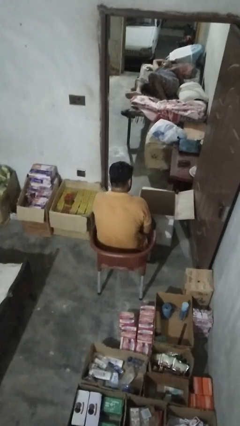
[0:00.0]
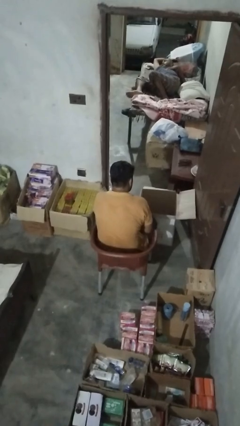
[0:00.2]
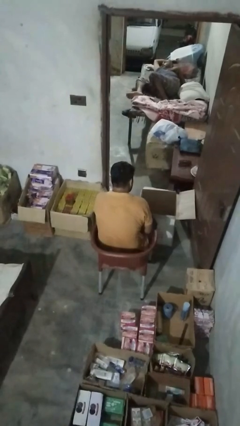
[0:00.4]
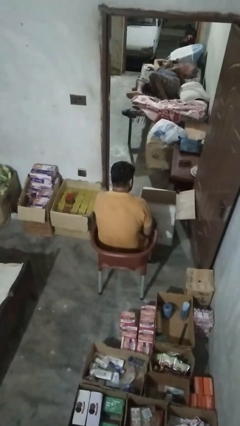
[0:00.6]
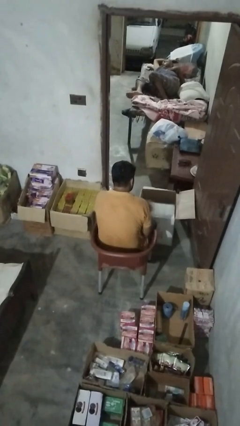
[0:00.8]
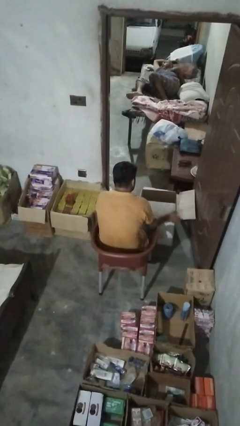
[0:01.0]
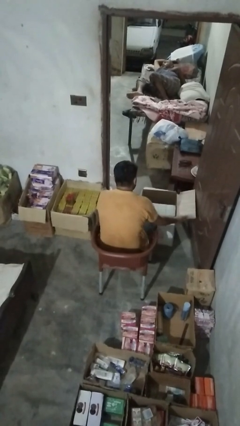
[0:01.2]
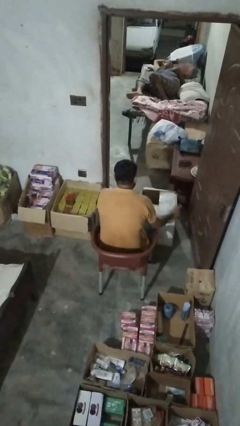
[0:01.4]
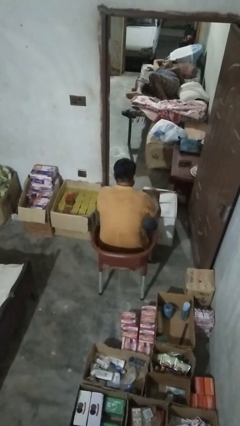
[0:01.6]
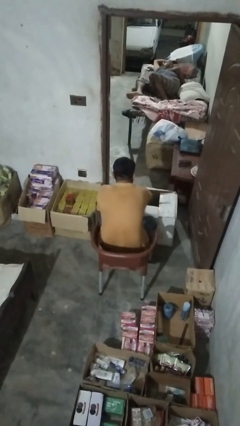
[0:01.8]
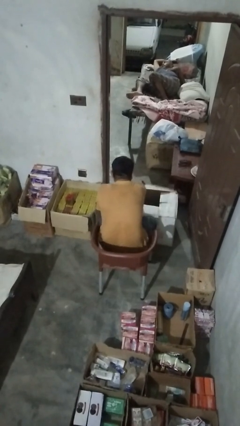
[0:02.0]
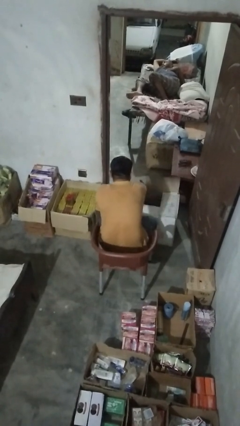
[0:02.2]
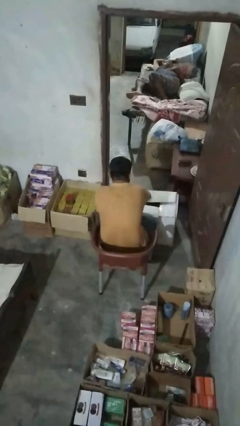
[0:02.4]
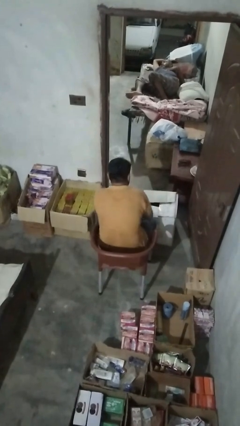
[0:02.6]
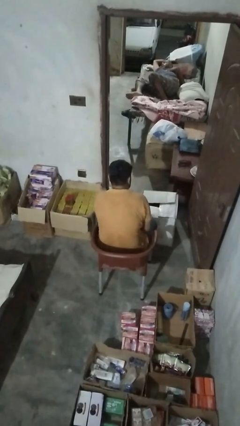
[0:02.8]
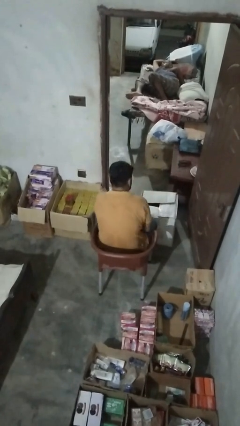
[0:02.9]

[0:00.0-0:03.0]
person opens box

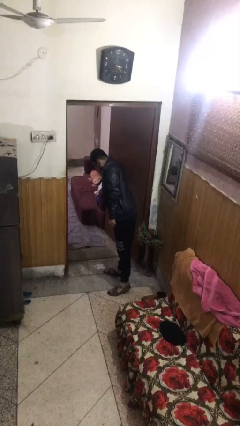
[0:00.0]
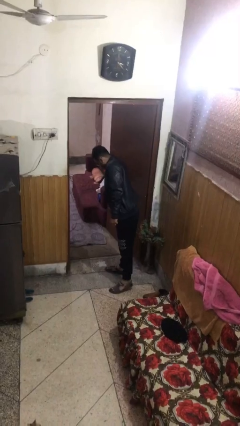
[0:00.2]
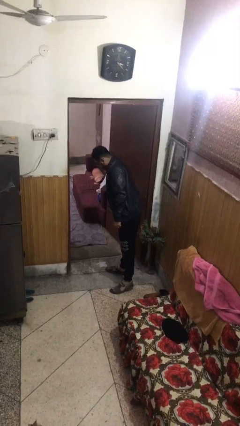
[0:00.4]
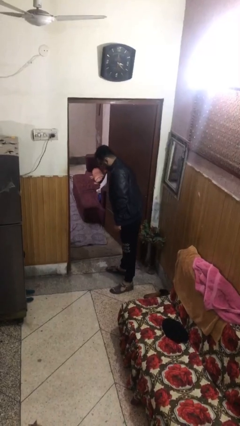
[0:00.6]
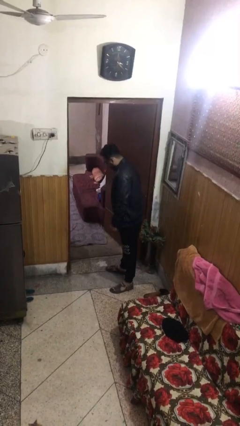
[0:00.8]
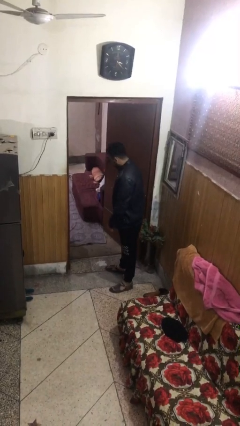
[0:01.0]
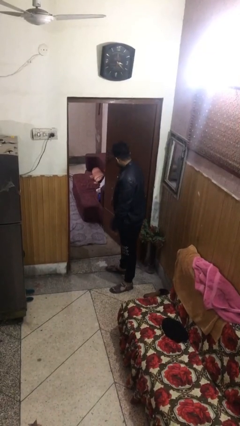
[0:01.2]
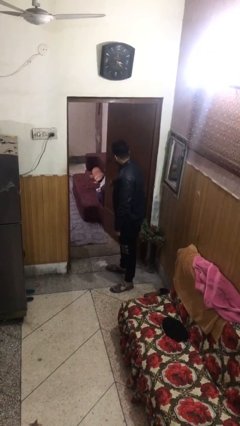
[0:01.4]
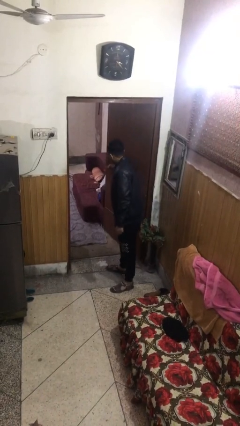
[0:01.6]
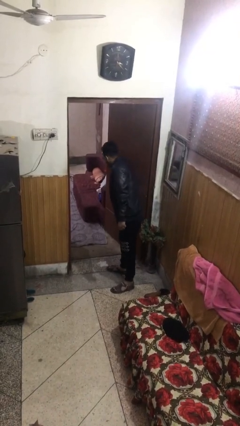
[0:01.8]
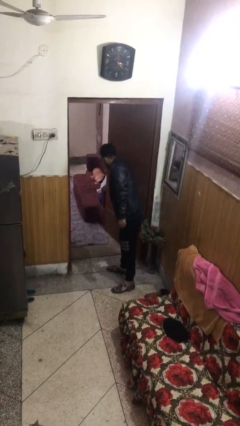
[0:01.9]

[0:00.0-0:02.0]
person closes facility door

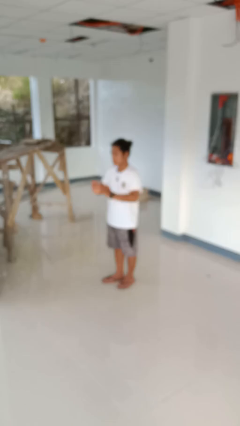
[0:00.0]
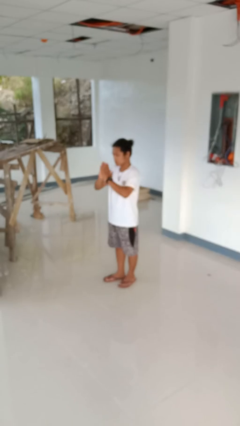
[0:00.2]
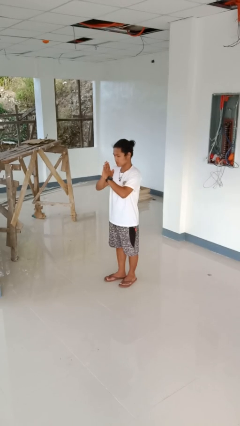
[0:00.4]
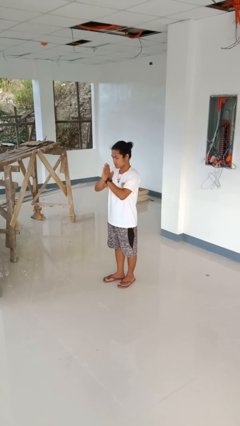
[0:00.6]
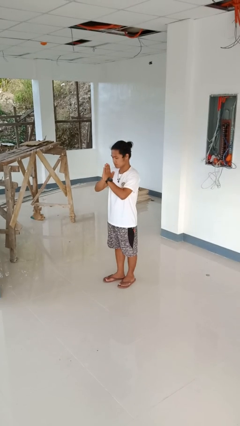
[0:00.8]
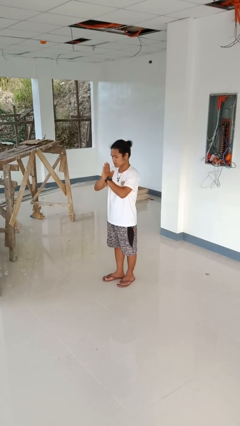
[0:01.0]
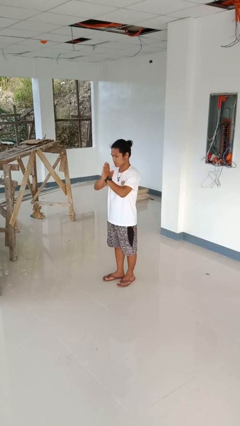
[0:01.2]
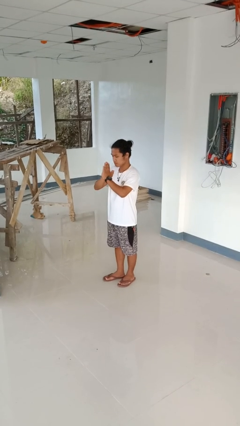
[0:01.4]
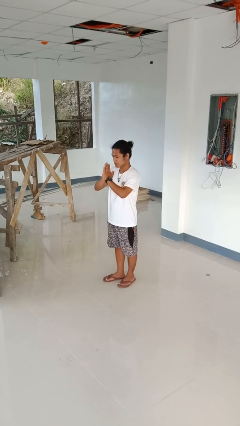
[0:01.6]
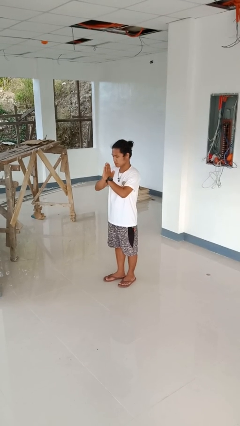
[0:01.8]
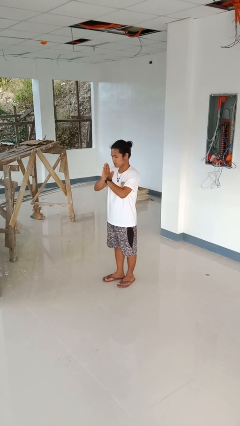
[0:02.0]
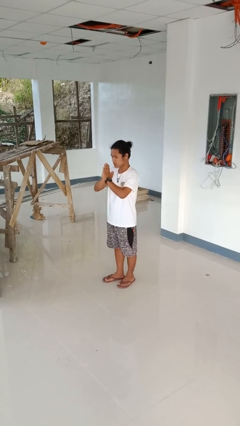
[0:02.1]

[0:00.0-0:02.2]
person prays

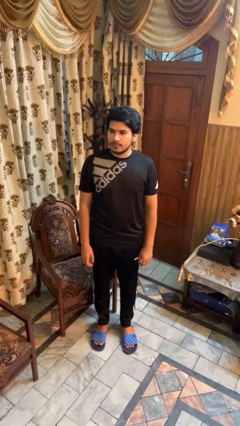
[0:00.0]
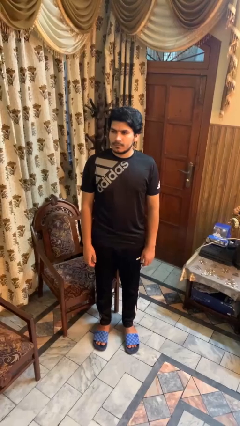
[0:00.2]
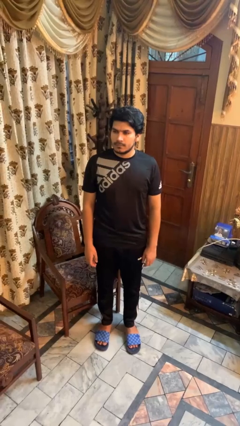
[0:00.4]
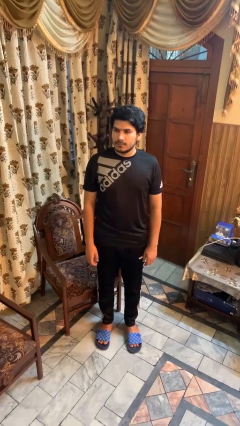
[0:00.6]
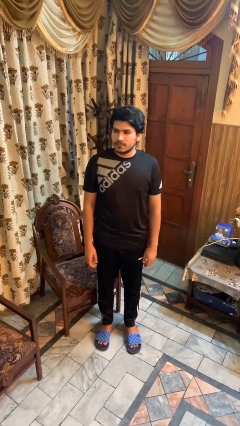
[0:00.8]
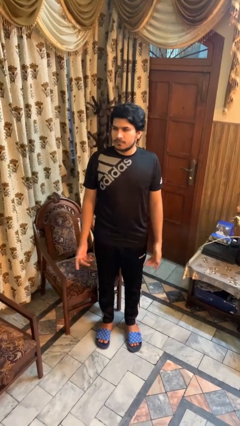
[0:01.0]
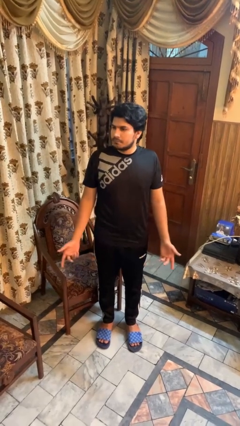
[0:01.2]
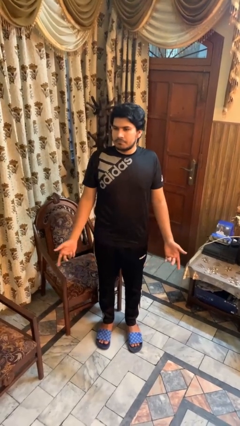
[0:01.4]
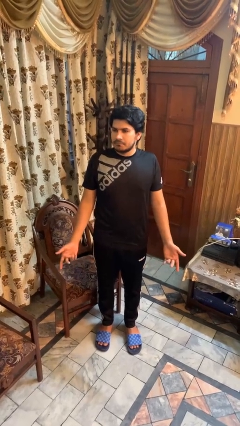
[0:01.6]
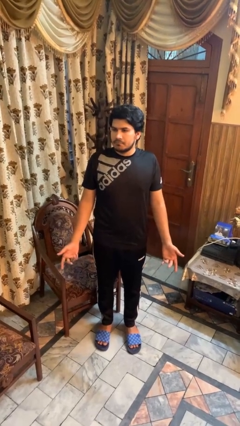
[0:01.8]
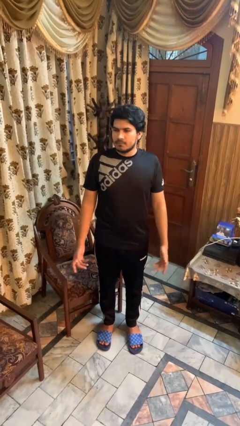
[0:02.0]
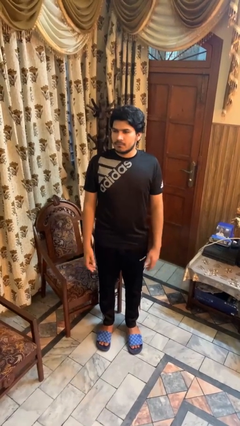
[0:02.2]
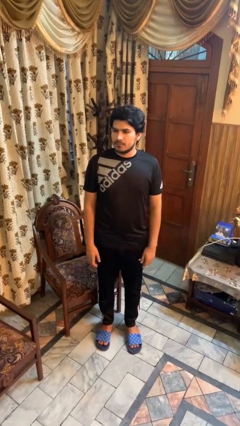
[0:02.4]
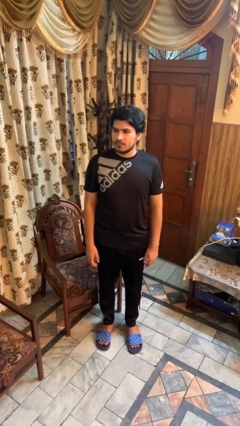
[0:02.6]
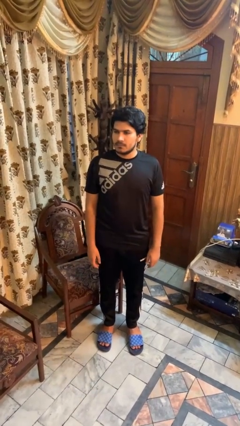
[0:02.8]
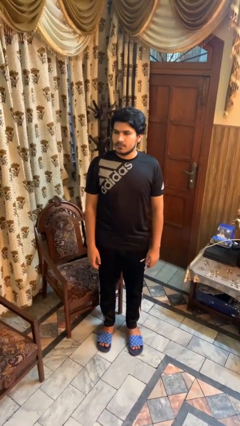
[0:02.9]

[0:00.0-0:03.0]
person shrugs

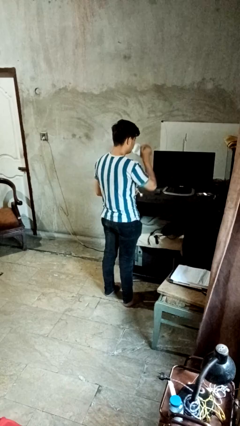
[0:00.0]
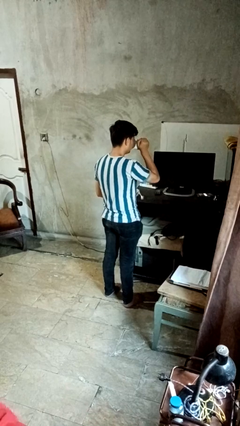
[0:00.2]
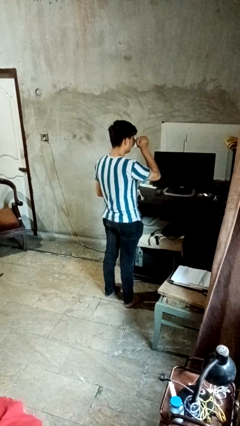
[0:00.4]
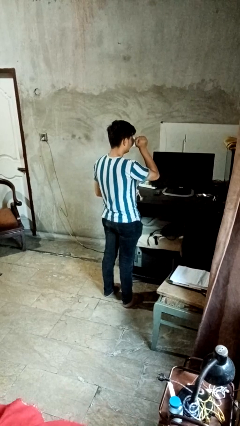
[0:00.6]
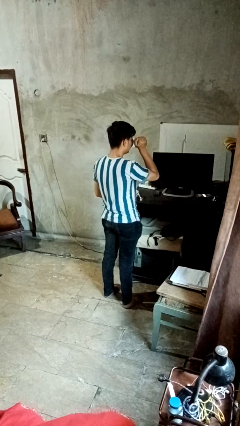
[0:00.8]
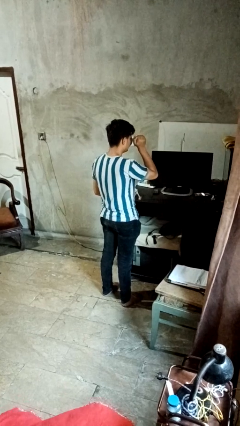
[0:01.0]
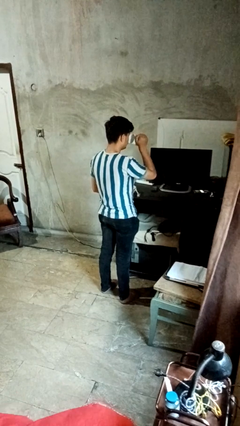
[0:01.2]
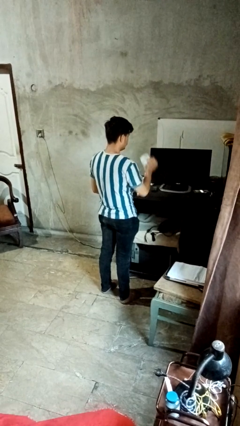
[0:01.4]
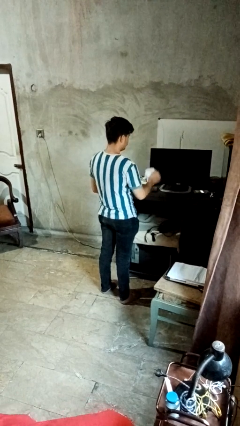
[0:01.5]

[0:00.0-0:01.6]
person drinks from mug

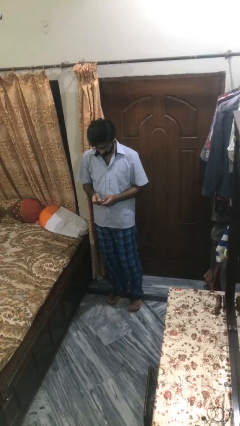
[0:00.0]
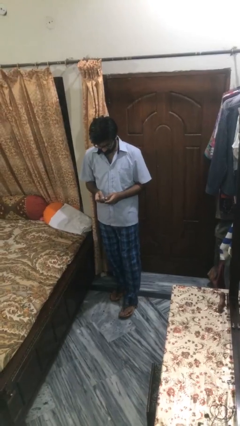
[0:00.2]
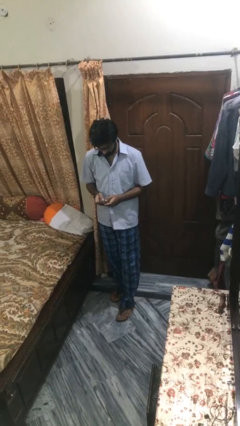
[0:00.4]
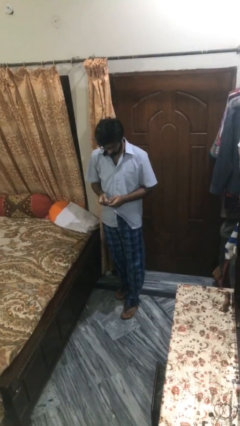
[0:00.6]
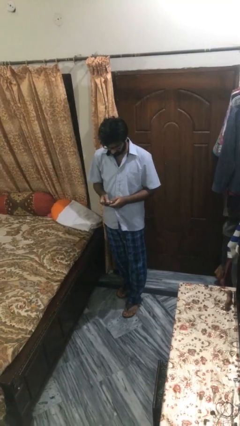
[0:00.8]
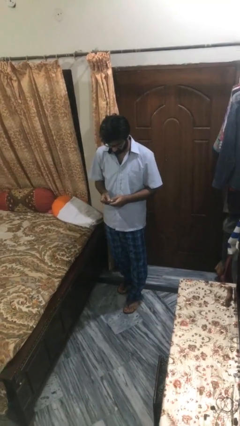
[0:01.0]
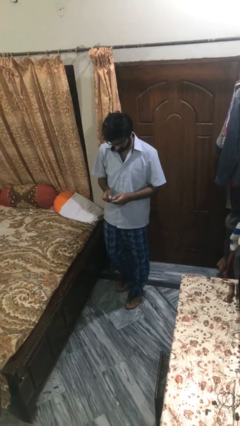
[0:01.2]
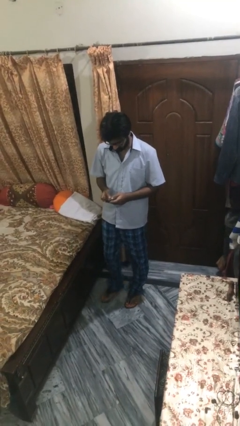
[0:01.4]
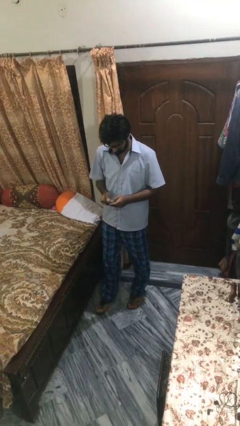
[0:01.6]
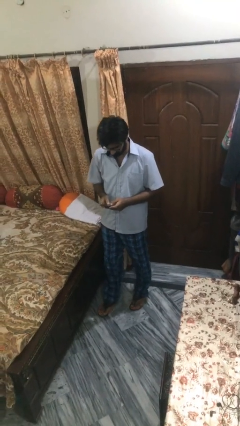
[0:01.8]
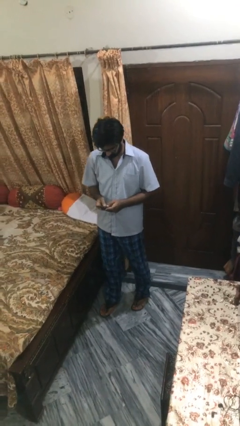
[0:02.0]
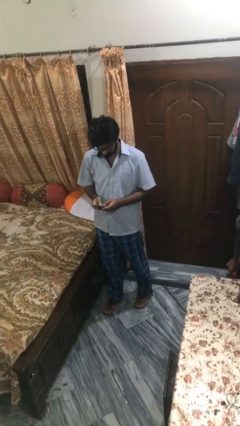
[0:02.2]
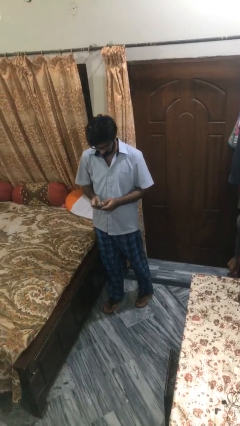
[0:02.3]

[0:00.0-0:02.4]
person texts on phone

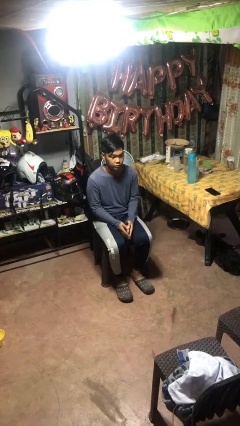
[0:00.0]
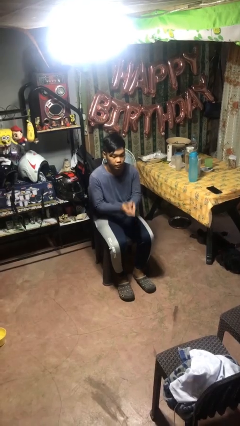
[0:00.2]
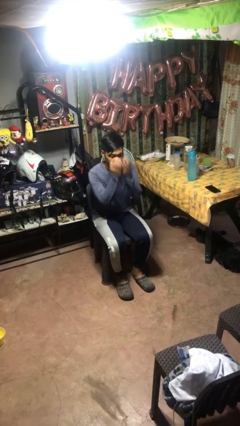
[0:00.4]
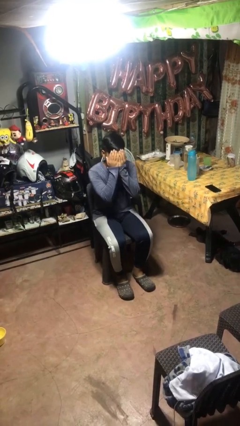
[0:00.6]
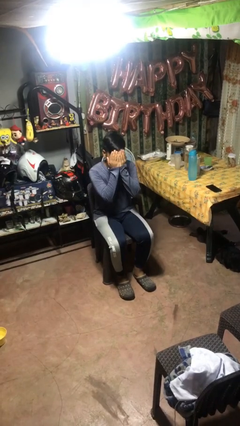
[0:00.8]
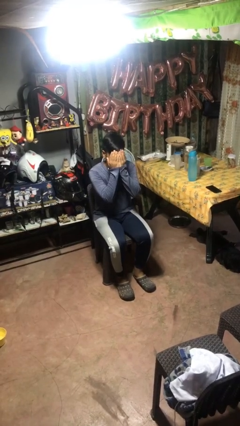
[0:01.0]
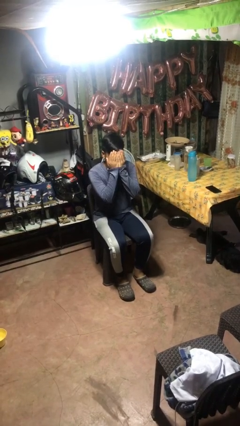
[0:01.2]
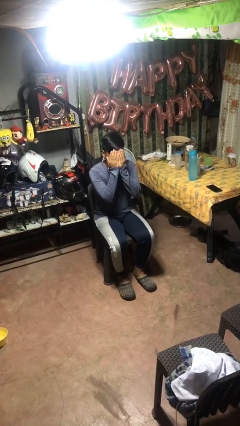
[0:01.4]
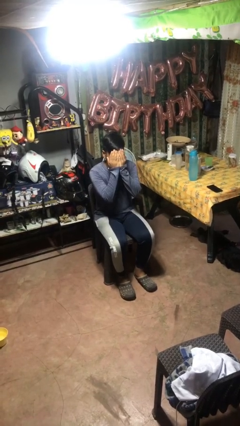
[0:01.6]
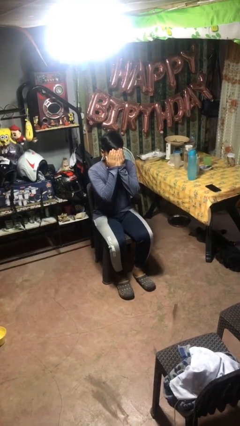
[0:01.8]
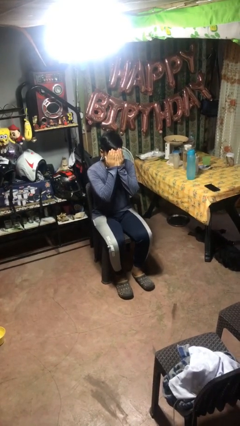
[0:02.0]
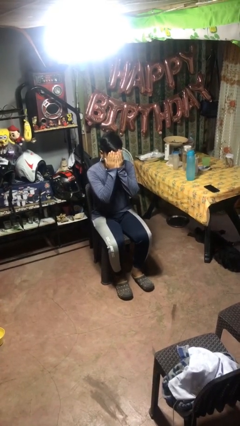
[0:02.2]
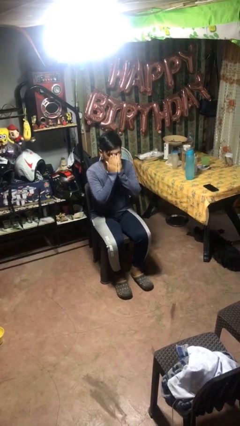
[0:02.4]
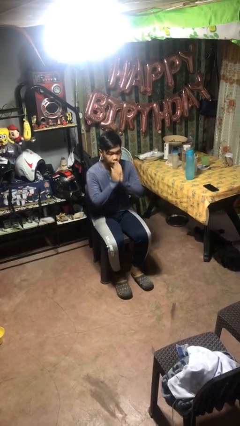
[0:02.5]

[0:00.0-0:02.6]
person covers face with hands
